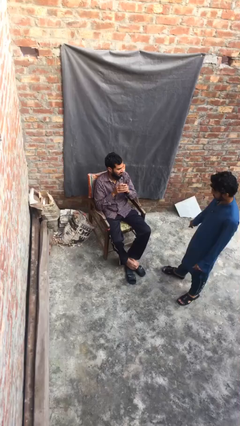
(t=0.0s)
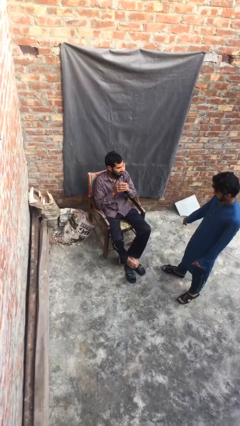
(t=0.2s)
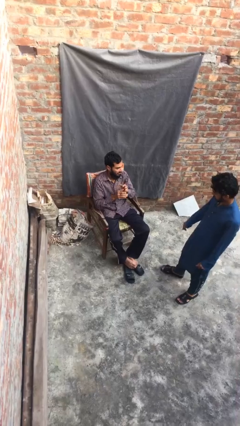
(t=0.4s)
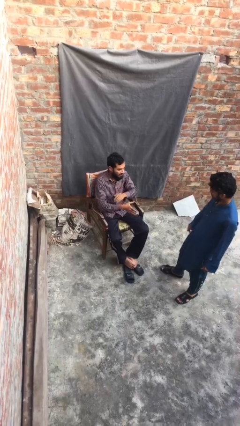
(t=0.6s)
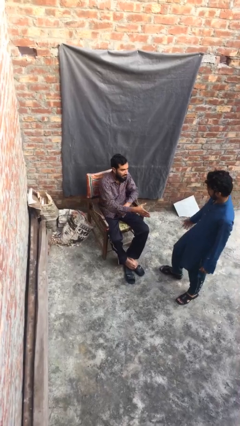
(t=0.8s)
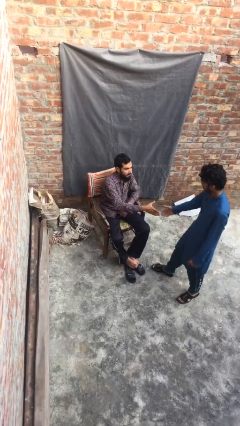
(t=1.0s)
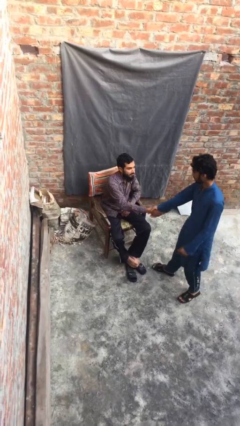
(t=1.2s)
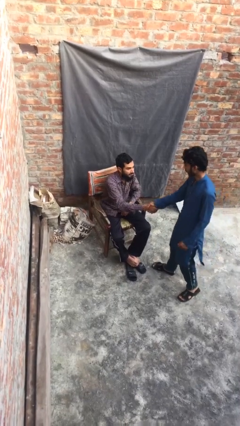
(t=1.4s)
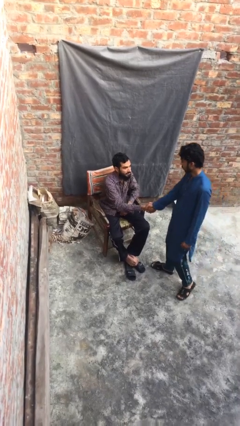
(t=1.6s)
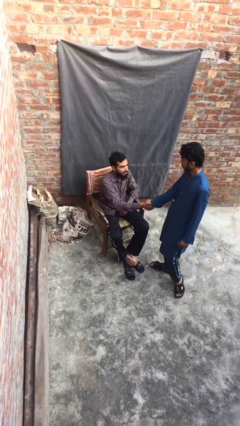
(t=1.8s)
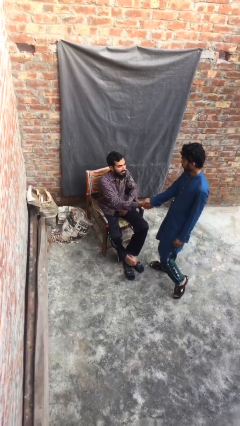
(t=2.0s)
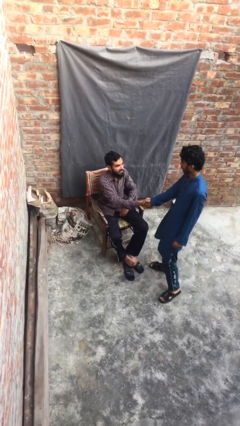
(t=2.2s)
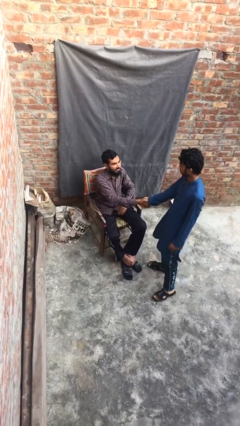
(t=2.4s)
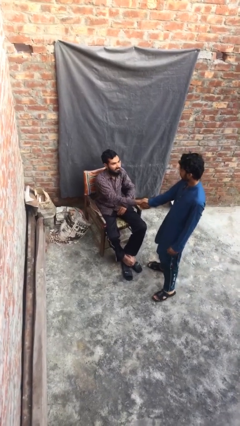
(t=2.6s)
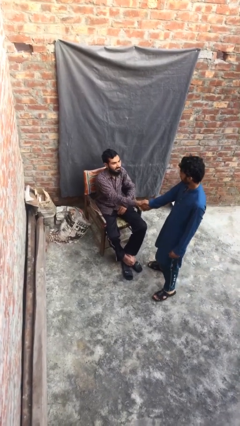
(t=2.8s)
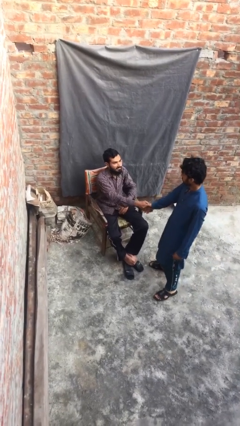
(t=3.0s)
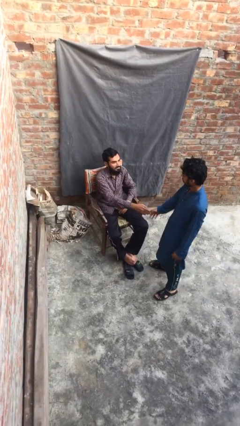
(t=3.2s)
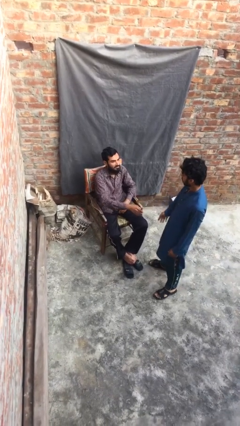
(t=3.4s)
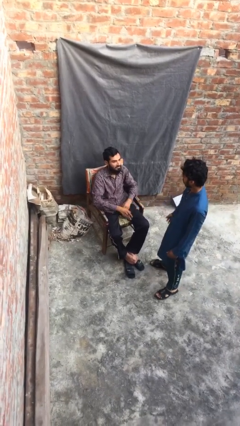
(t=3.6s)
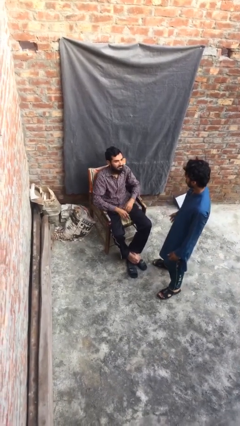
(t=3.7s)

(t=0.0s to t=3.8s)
person shakes hand

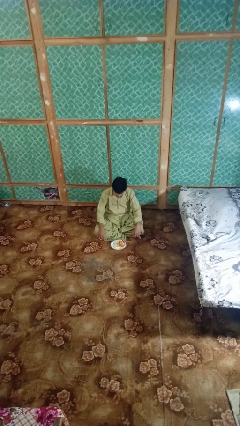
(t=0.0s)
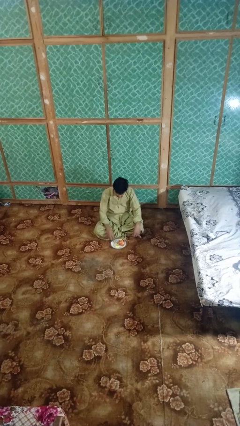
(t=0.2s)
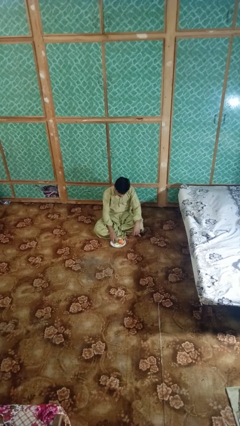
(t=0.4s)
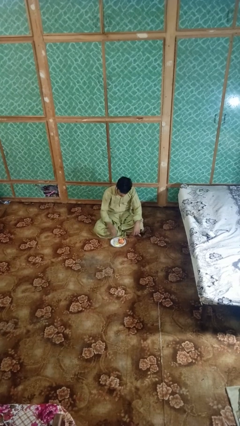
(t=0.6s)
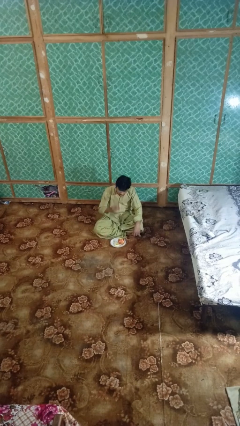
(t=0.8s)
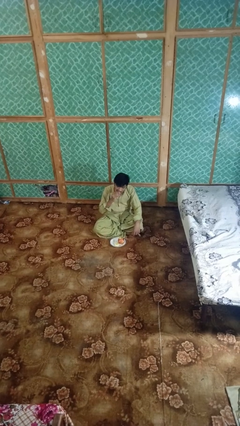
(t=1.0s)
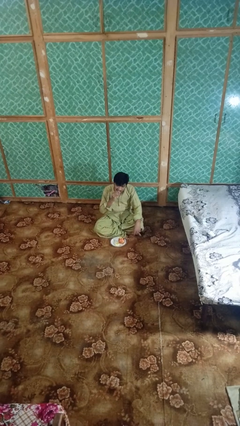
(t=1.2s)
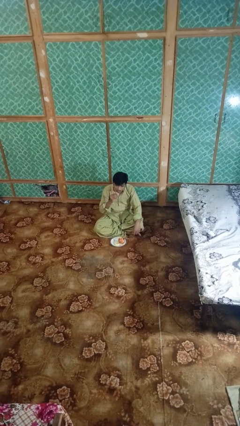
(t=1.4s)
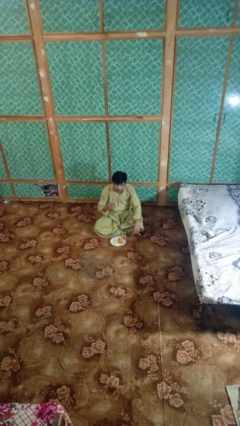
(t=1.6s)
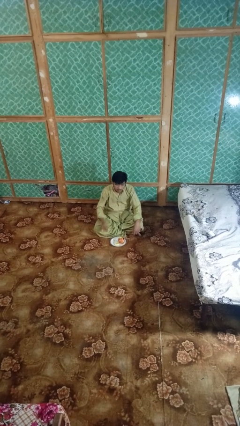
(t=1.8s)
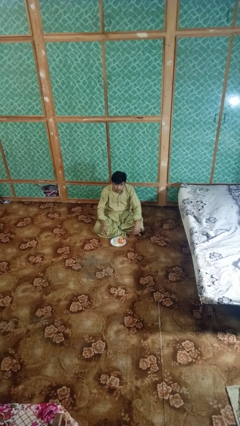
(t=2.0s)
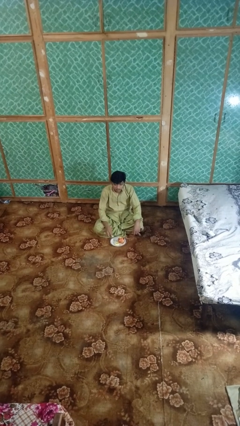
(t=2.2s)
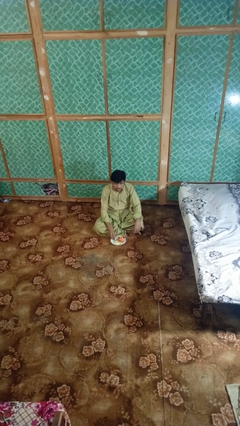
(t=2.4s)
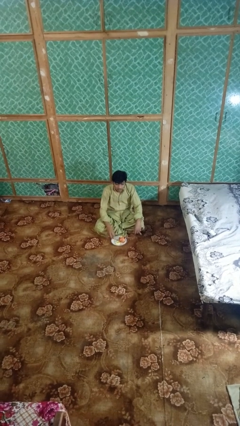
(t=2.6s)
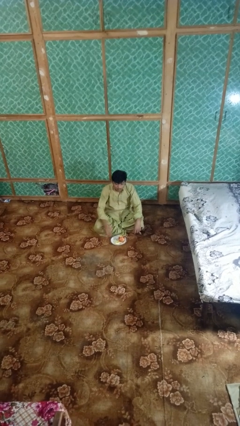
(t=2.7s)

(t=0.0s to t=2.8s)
person eats apple

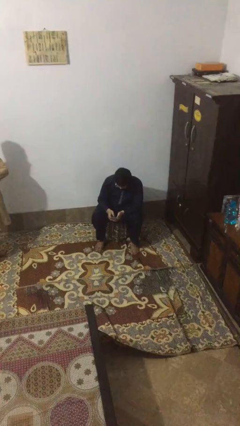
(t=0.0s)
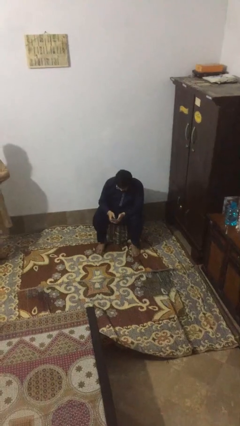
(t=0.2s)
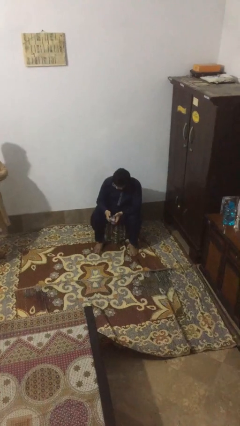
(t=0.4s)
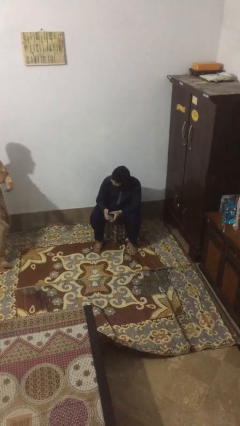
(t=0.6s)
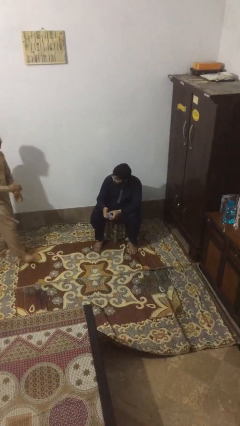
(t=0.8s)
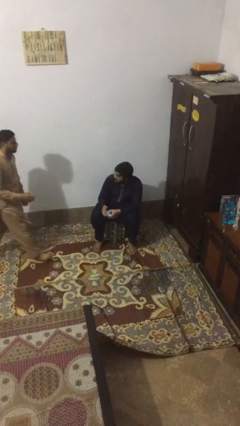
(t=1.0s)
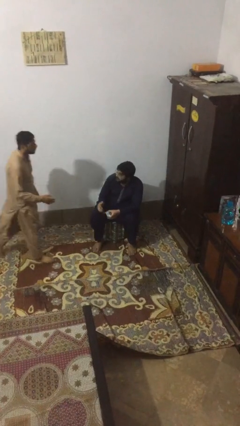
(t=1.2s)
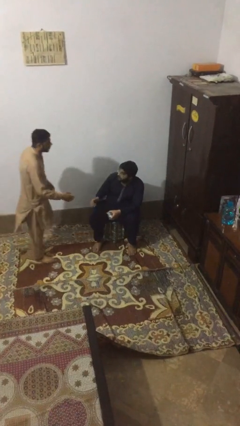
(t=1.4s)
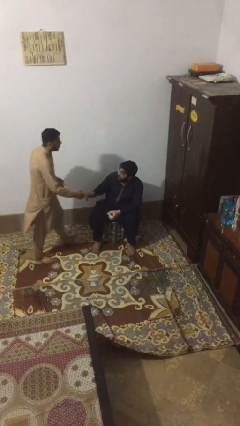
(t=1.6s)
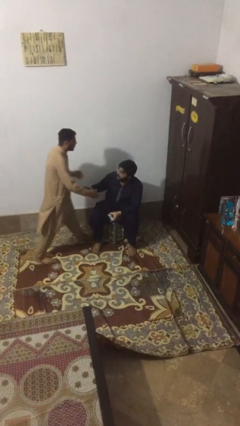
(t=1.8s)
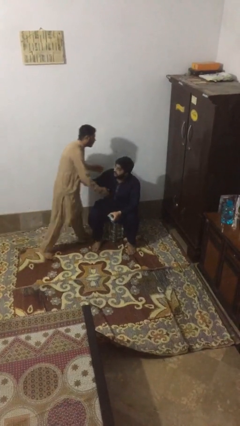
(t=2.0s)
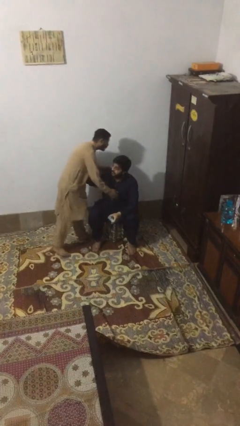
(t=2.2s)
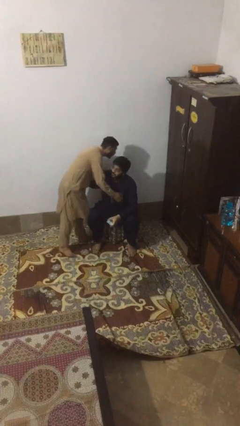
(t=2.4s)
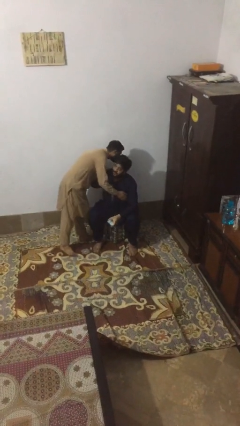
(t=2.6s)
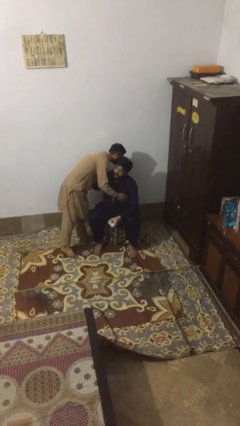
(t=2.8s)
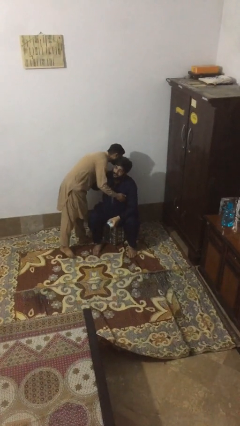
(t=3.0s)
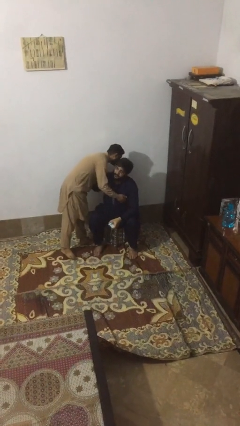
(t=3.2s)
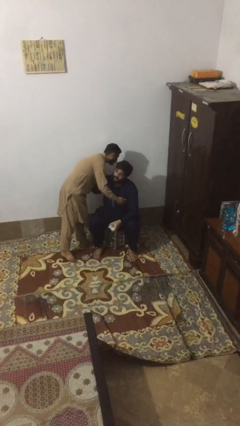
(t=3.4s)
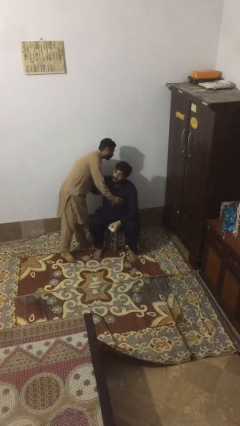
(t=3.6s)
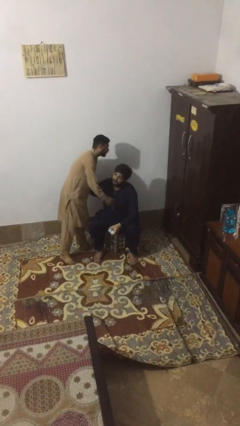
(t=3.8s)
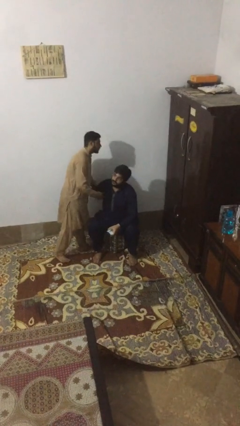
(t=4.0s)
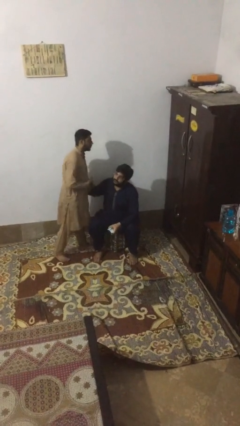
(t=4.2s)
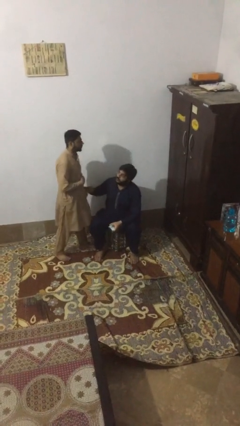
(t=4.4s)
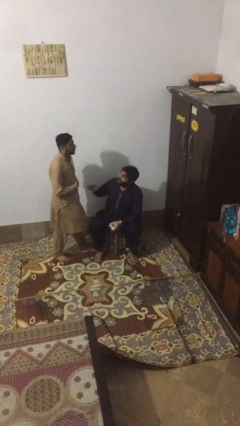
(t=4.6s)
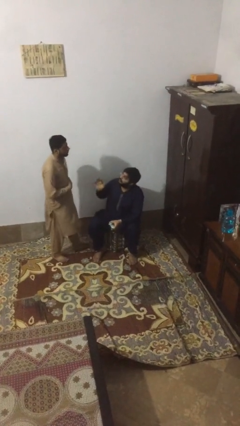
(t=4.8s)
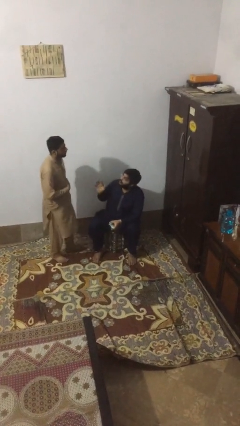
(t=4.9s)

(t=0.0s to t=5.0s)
person embraces person

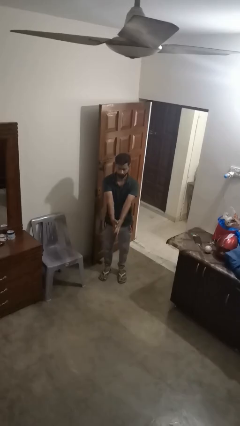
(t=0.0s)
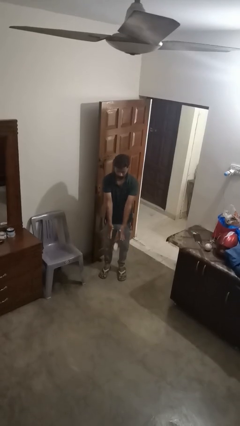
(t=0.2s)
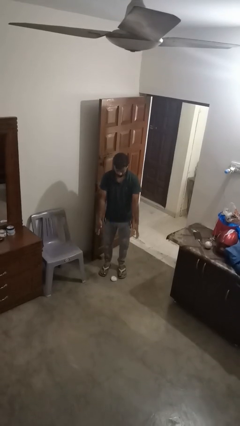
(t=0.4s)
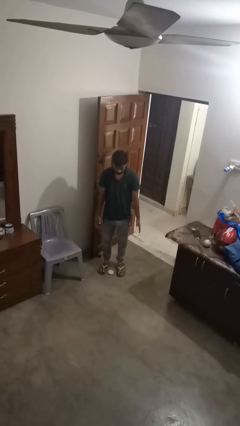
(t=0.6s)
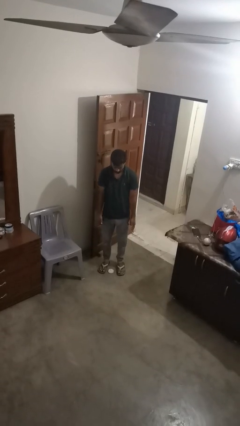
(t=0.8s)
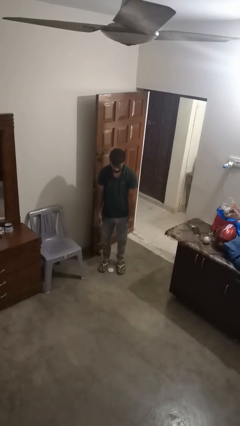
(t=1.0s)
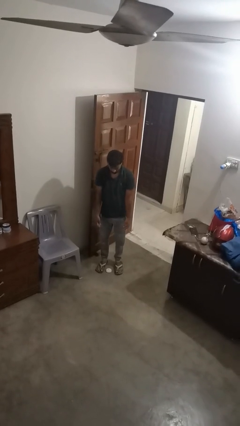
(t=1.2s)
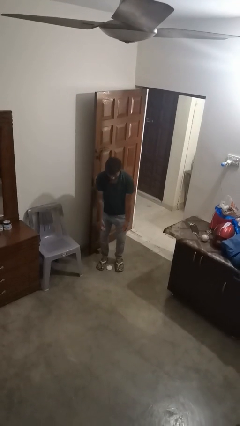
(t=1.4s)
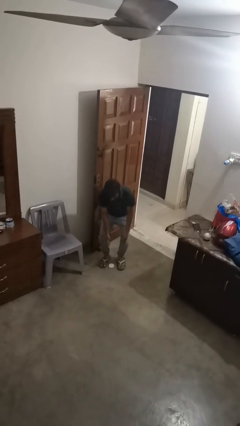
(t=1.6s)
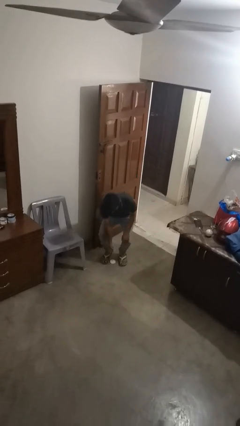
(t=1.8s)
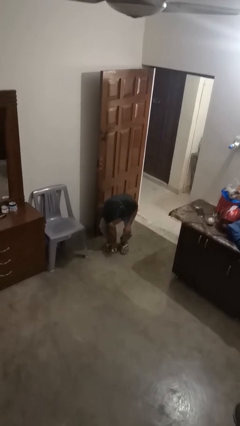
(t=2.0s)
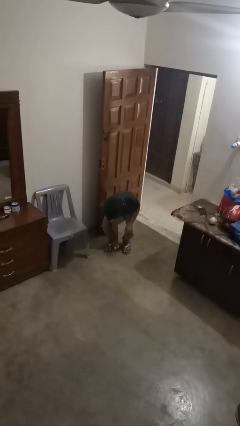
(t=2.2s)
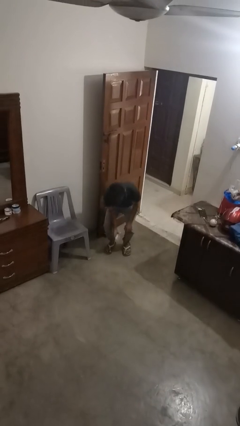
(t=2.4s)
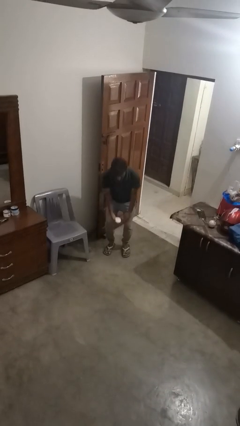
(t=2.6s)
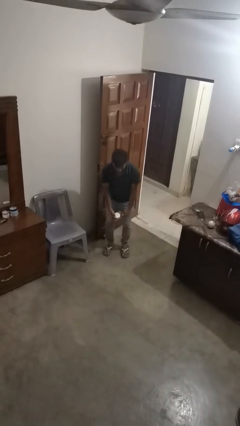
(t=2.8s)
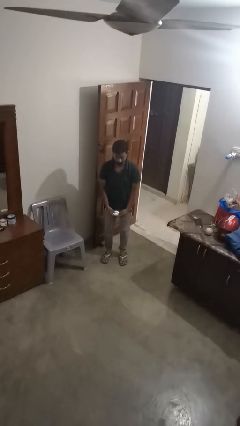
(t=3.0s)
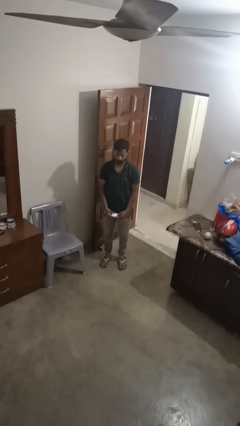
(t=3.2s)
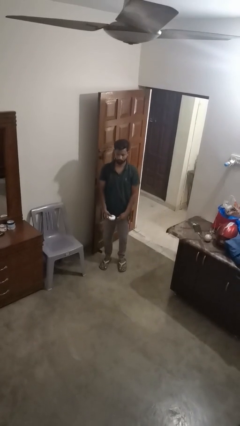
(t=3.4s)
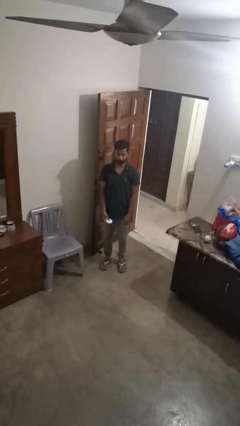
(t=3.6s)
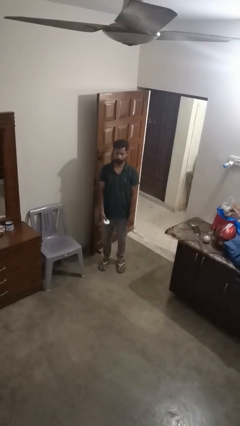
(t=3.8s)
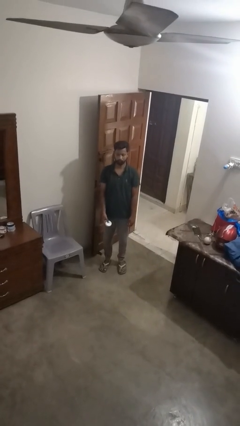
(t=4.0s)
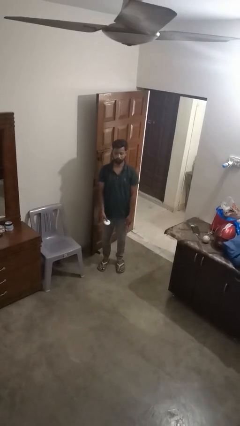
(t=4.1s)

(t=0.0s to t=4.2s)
person picks up object from floor

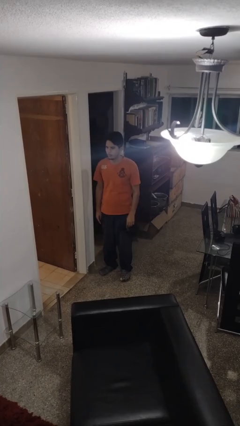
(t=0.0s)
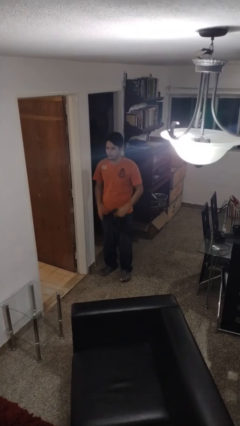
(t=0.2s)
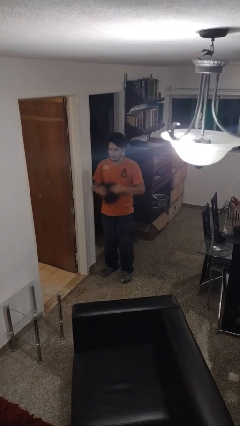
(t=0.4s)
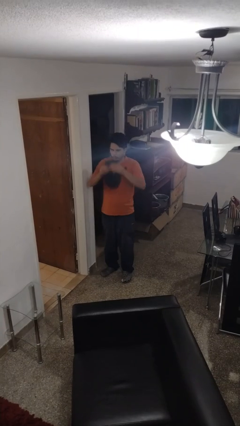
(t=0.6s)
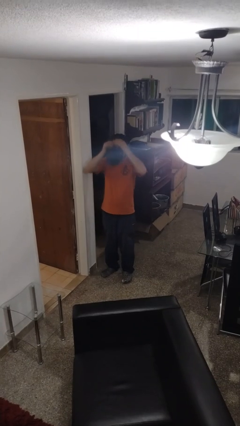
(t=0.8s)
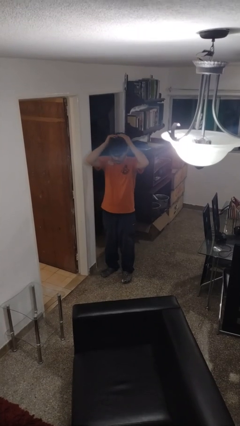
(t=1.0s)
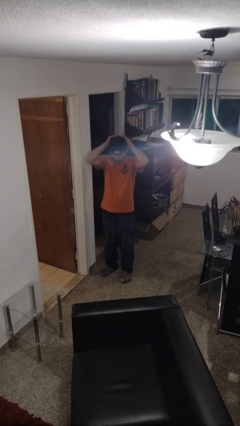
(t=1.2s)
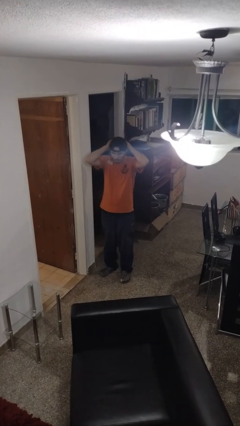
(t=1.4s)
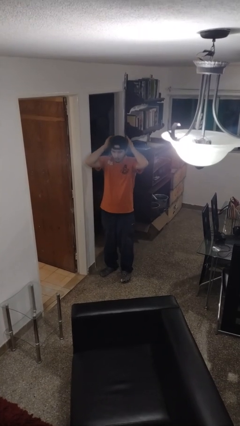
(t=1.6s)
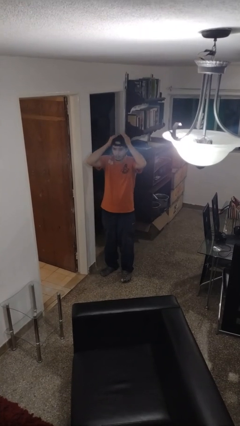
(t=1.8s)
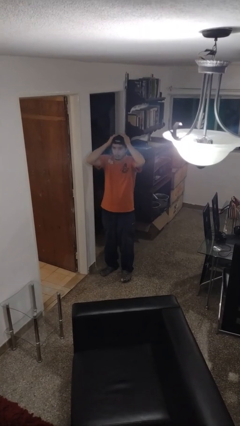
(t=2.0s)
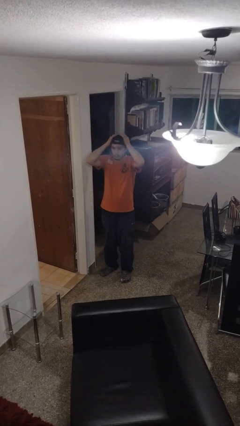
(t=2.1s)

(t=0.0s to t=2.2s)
person puts on hat
